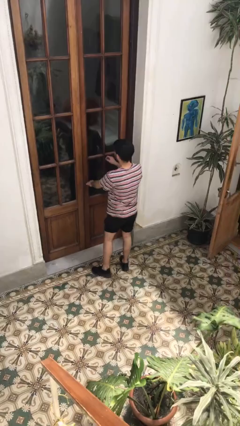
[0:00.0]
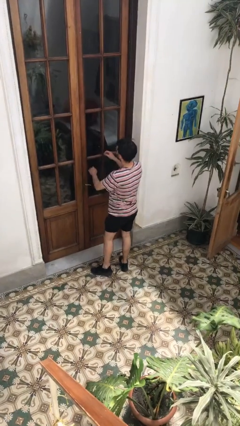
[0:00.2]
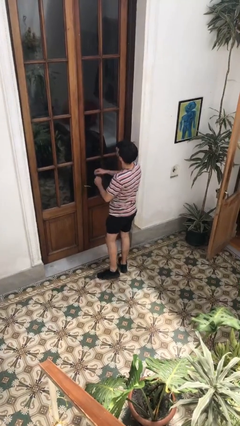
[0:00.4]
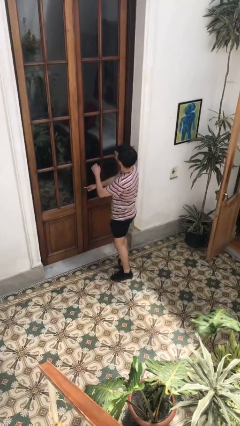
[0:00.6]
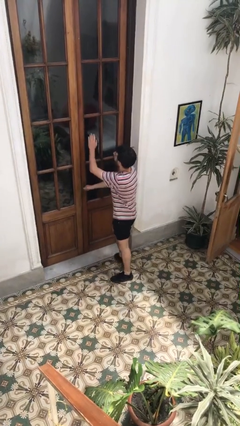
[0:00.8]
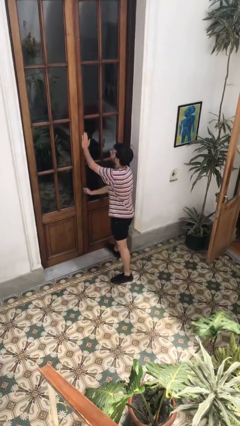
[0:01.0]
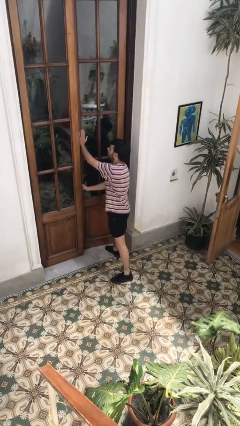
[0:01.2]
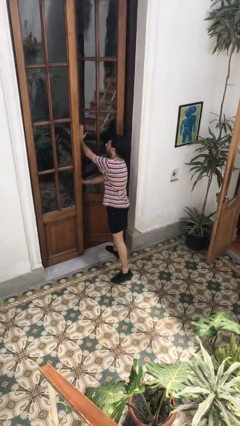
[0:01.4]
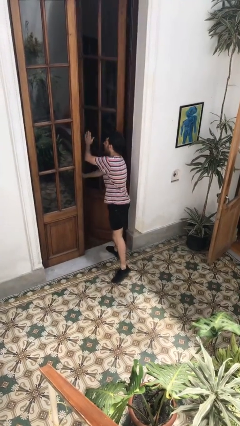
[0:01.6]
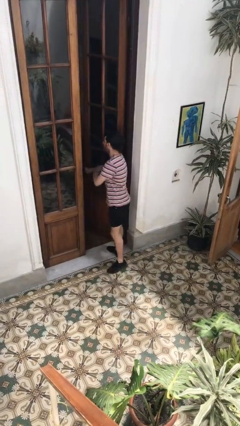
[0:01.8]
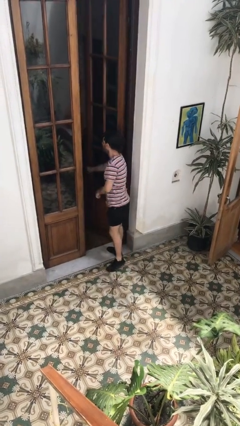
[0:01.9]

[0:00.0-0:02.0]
person opens facility door

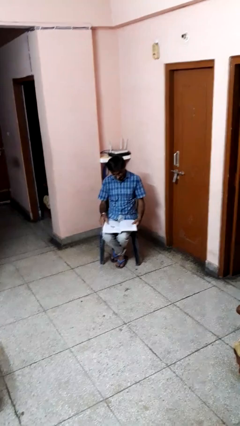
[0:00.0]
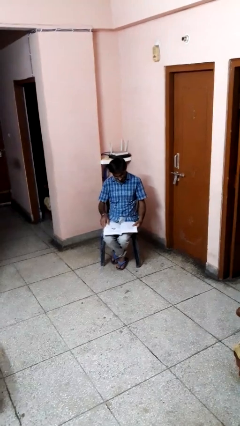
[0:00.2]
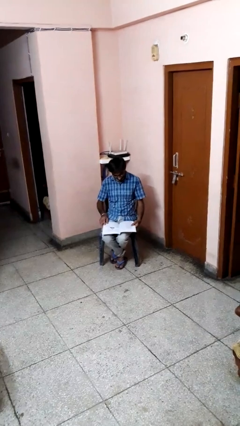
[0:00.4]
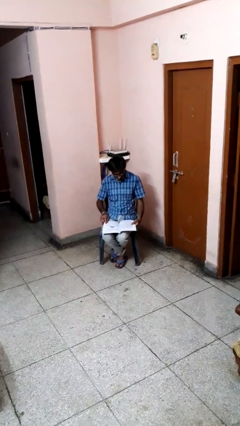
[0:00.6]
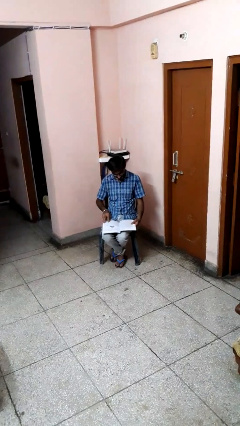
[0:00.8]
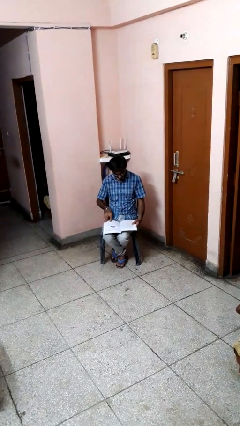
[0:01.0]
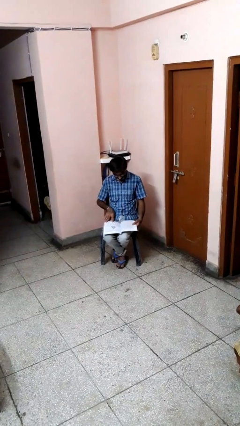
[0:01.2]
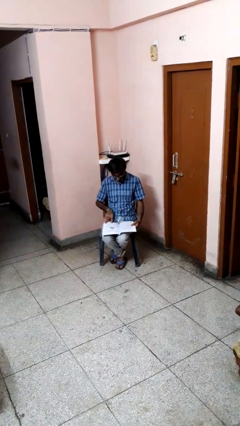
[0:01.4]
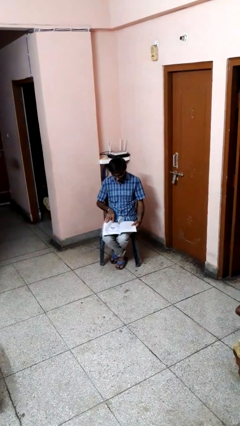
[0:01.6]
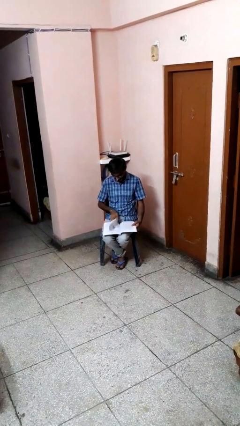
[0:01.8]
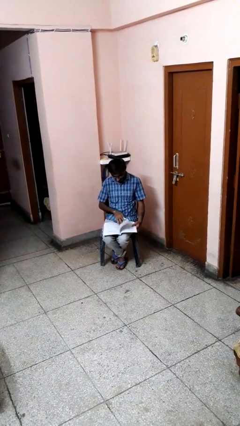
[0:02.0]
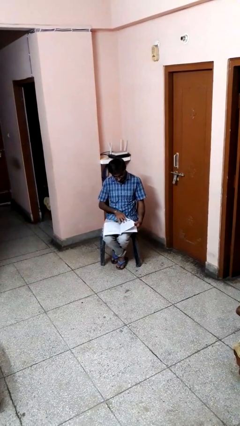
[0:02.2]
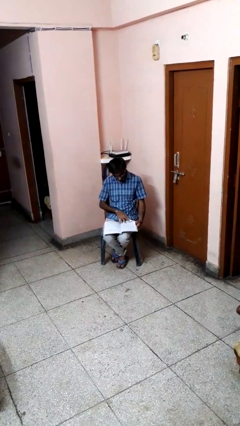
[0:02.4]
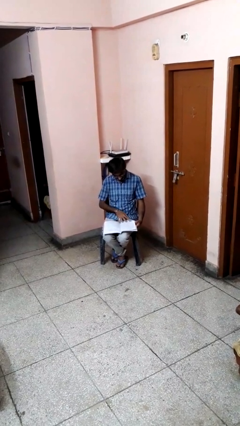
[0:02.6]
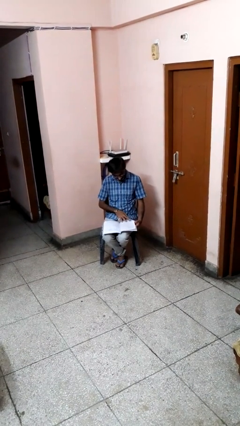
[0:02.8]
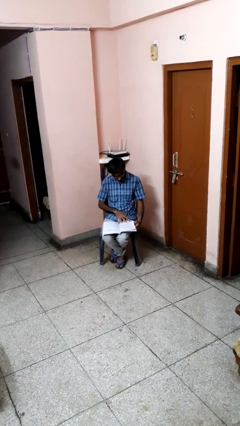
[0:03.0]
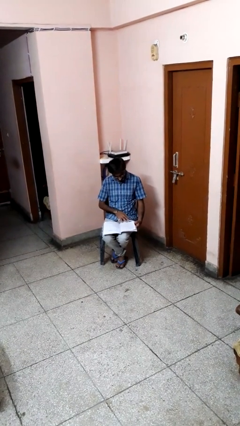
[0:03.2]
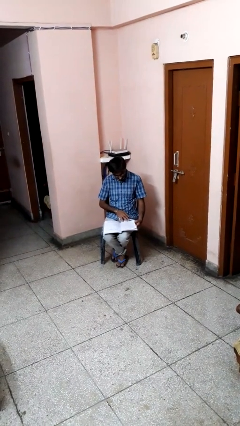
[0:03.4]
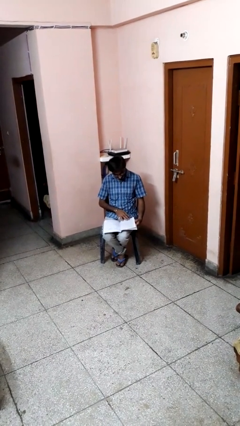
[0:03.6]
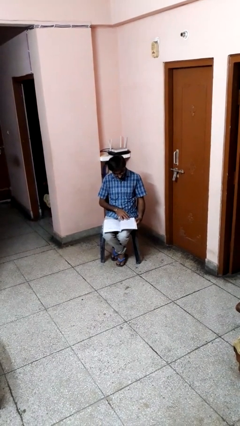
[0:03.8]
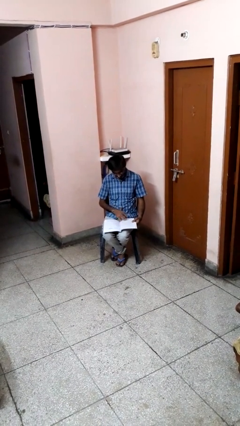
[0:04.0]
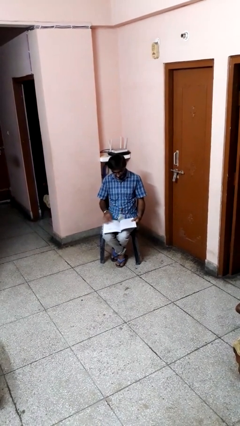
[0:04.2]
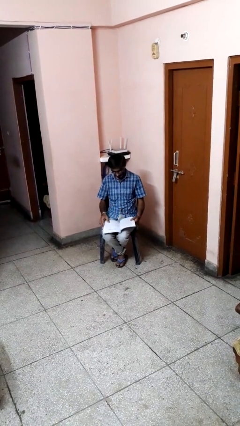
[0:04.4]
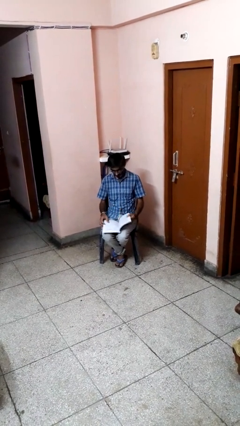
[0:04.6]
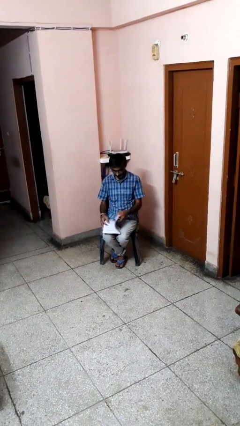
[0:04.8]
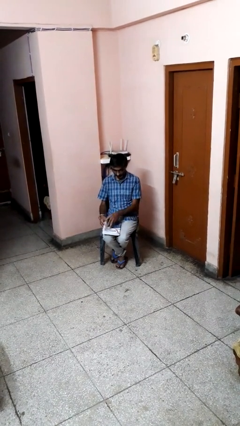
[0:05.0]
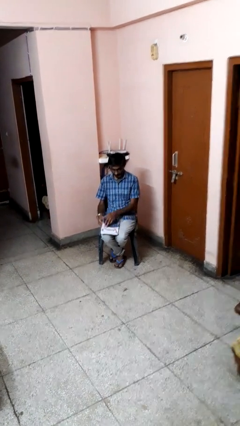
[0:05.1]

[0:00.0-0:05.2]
person reads book

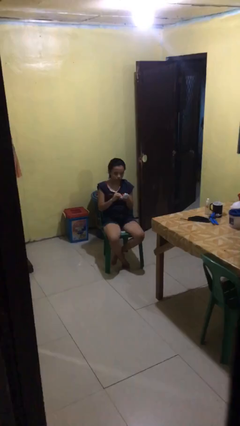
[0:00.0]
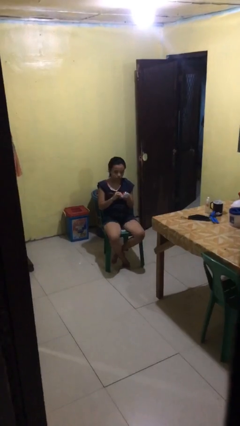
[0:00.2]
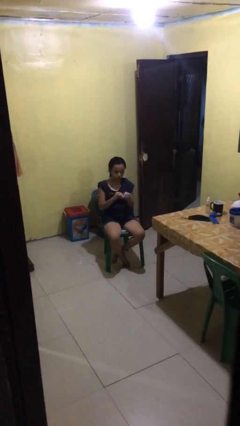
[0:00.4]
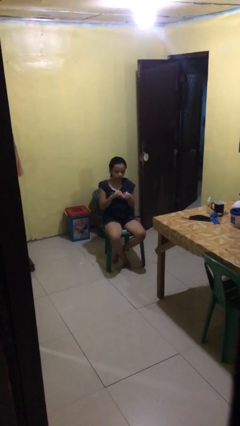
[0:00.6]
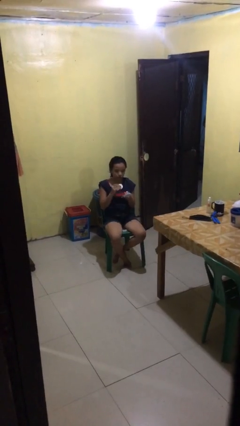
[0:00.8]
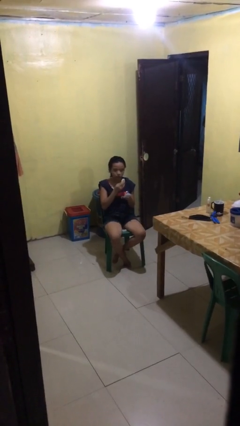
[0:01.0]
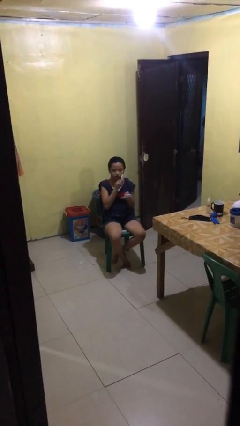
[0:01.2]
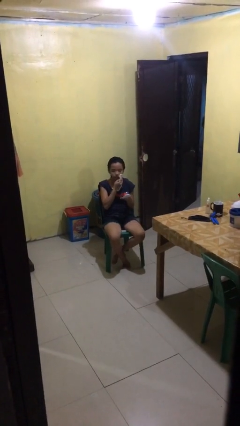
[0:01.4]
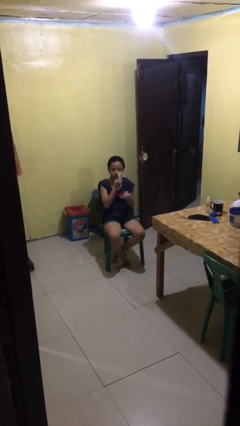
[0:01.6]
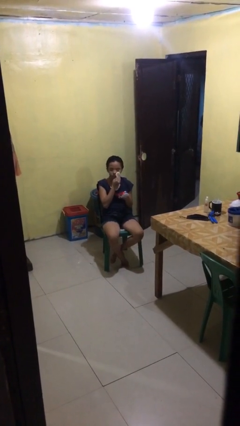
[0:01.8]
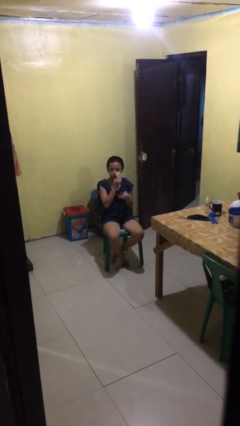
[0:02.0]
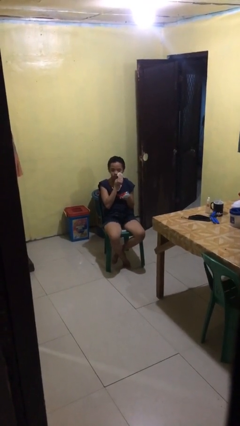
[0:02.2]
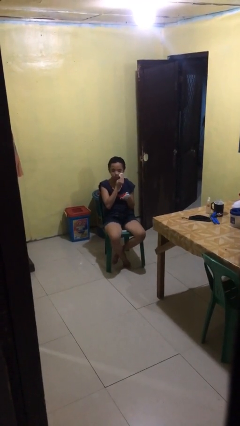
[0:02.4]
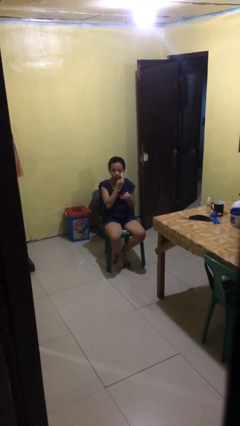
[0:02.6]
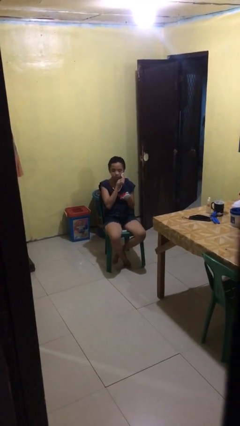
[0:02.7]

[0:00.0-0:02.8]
person applies foundation makeup

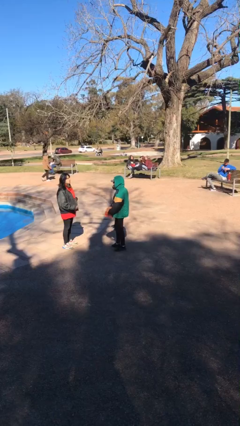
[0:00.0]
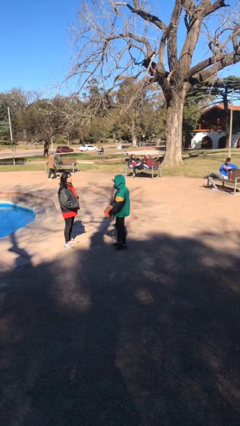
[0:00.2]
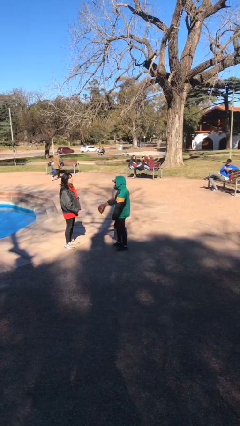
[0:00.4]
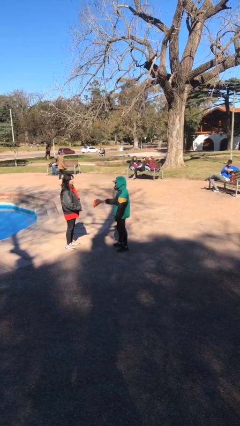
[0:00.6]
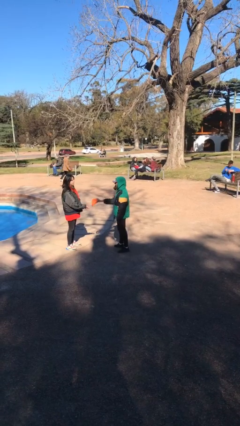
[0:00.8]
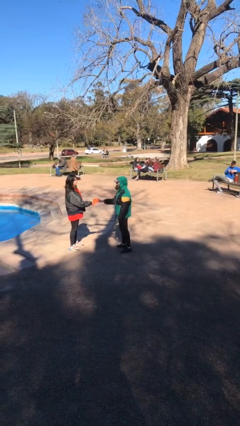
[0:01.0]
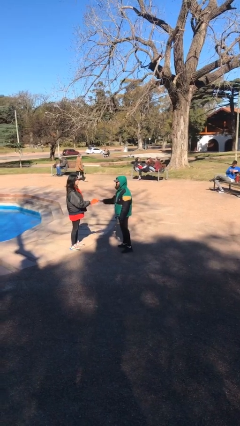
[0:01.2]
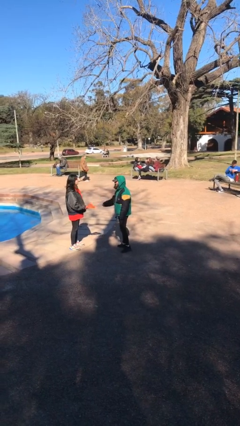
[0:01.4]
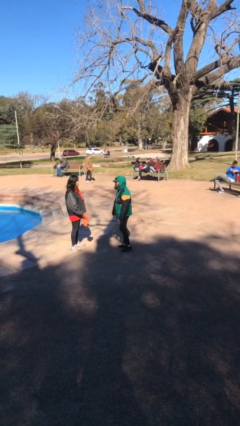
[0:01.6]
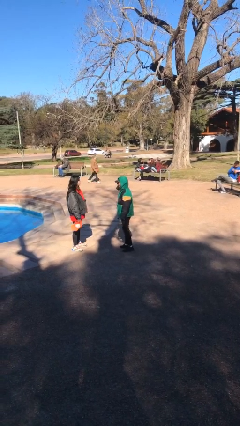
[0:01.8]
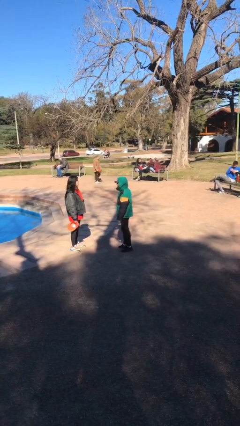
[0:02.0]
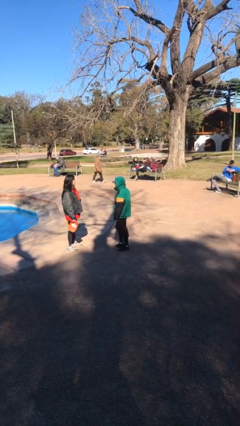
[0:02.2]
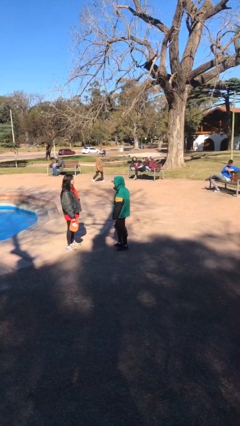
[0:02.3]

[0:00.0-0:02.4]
person transfers object to person

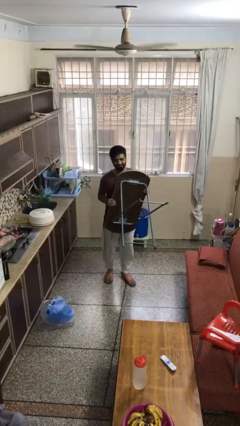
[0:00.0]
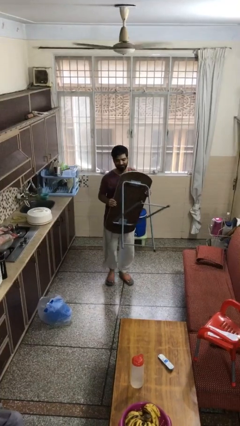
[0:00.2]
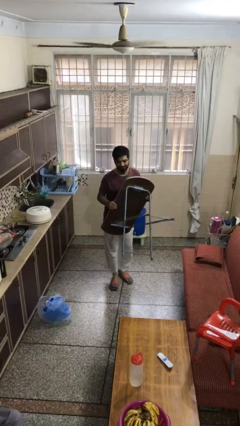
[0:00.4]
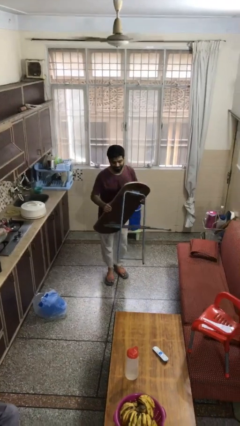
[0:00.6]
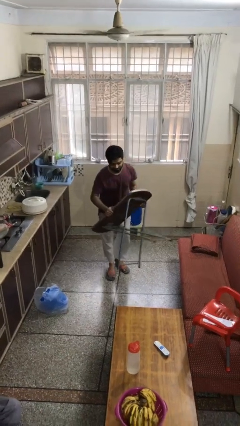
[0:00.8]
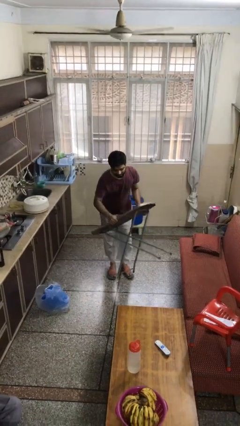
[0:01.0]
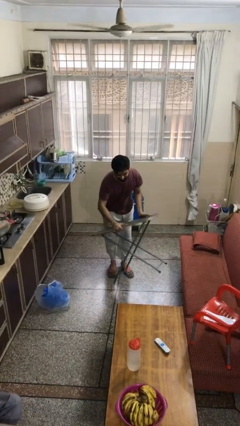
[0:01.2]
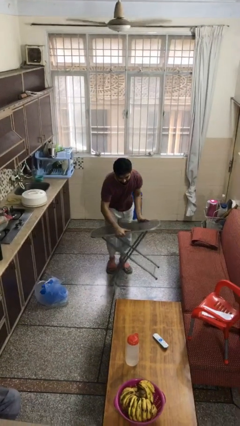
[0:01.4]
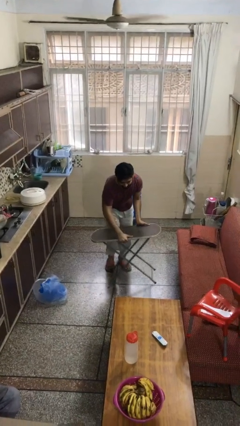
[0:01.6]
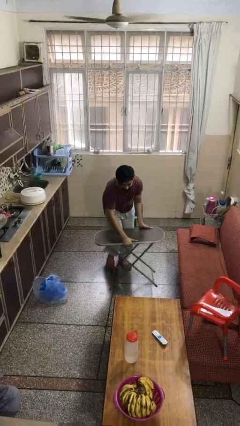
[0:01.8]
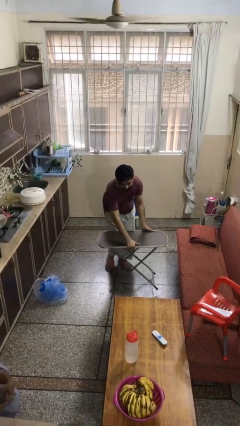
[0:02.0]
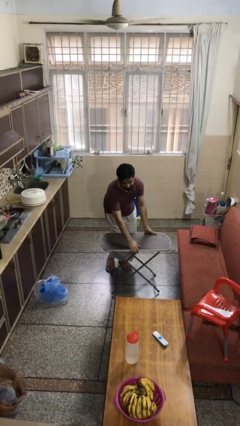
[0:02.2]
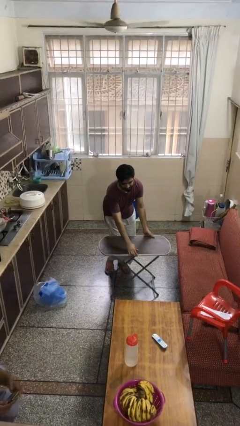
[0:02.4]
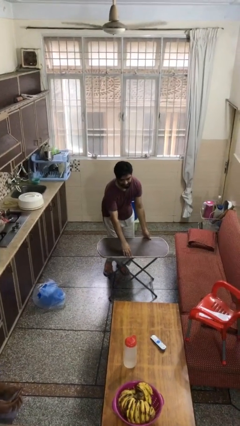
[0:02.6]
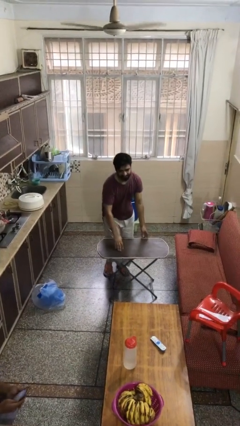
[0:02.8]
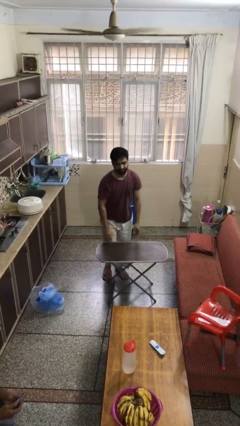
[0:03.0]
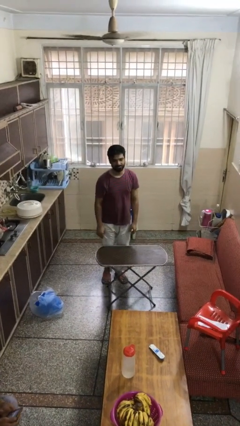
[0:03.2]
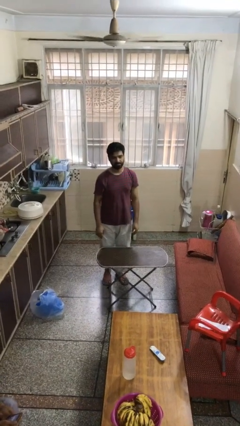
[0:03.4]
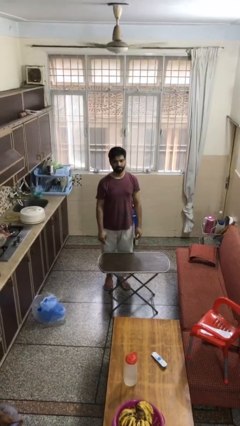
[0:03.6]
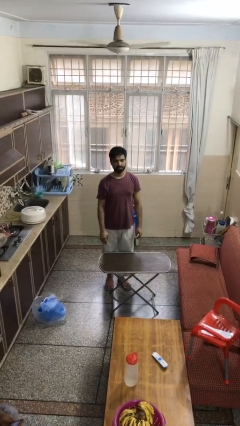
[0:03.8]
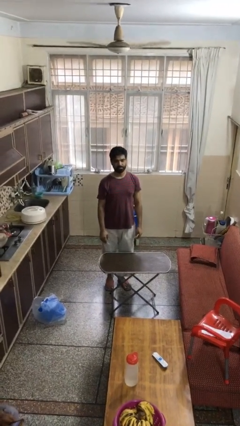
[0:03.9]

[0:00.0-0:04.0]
person puts down object on floor

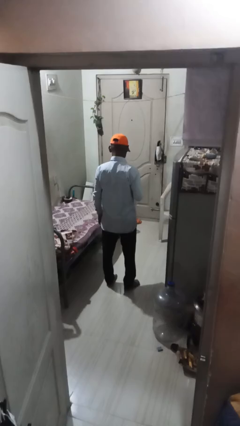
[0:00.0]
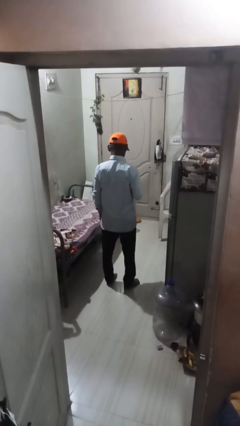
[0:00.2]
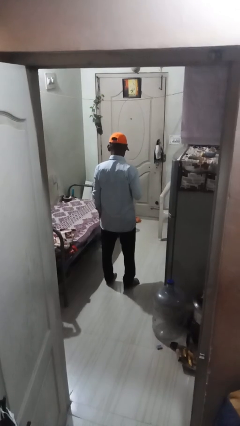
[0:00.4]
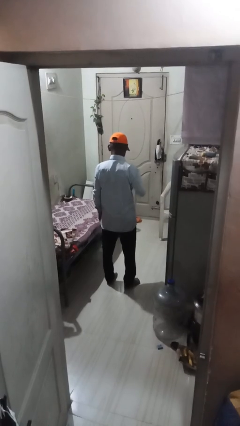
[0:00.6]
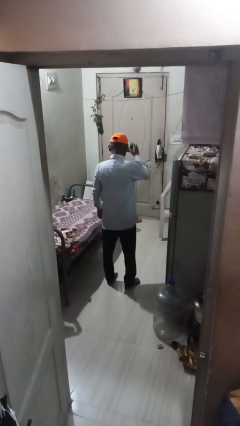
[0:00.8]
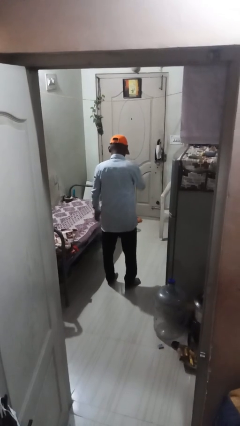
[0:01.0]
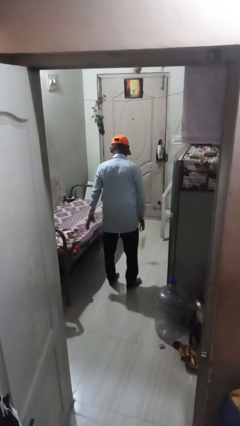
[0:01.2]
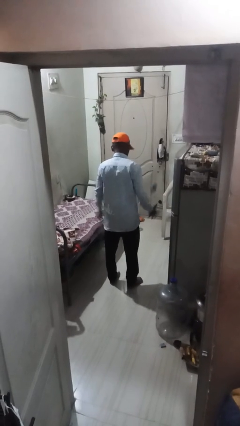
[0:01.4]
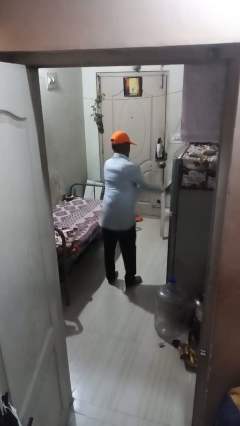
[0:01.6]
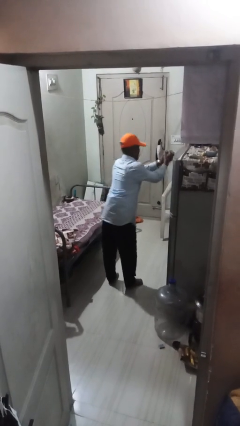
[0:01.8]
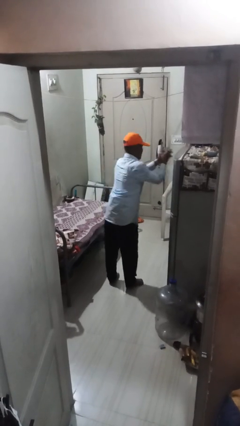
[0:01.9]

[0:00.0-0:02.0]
person bounces ball on floor
